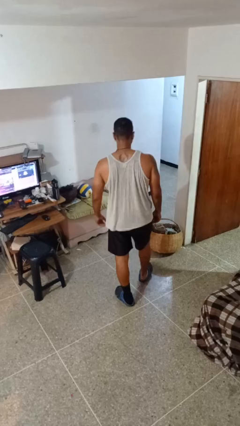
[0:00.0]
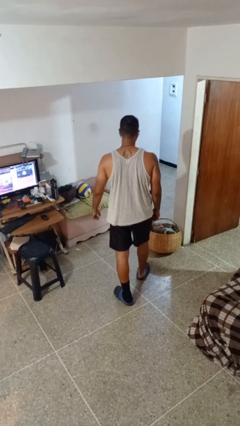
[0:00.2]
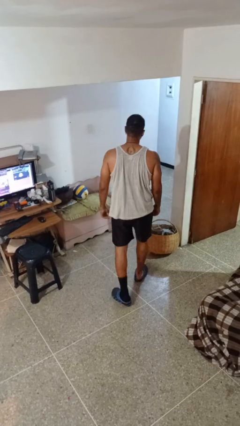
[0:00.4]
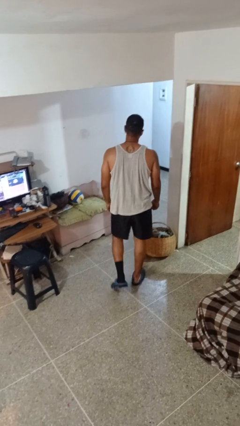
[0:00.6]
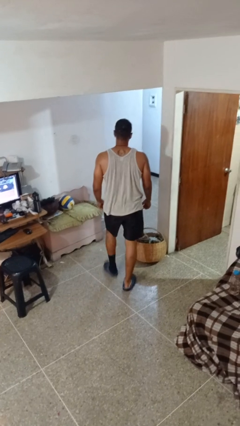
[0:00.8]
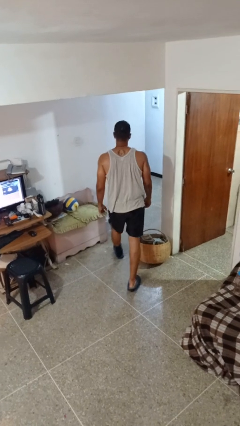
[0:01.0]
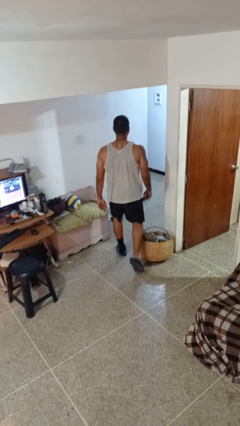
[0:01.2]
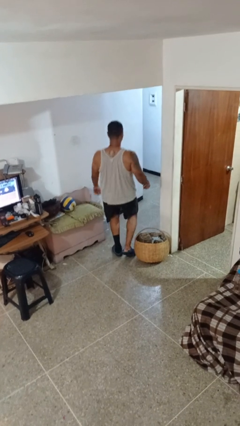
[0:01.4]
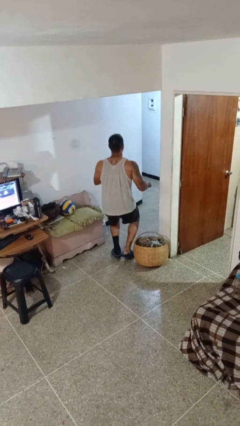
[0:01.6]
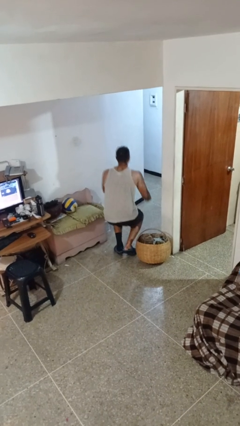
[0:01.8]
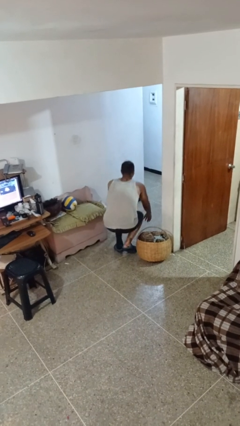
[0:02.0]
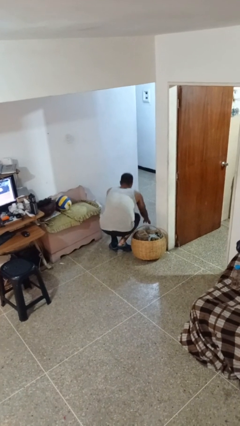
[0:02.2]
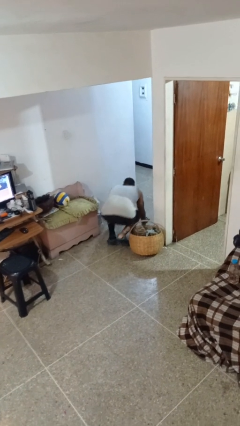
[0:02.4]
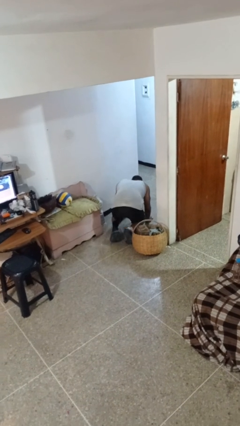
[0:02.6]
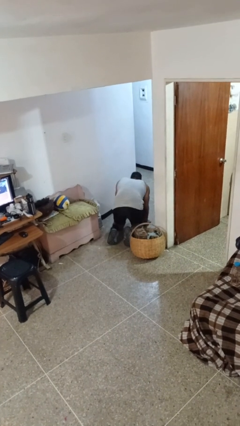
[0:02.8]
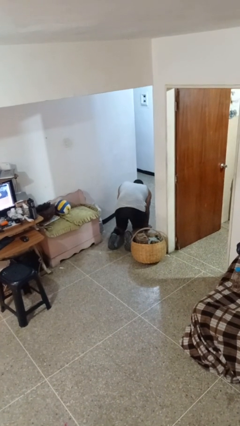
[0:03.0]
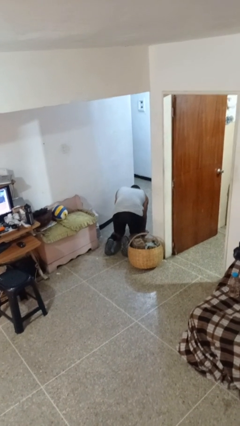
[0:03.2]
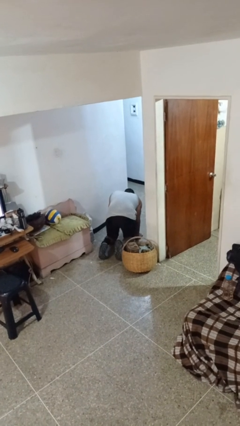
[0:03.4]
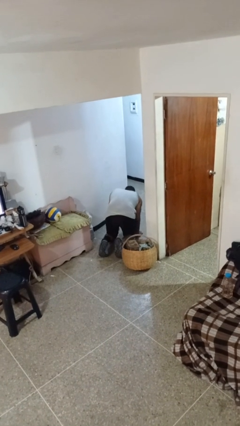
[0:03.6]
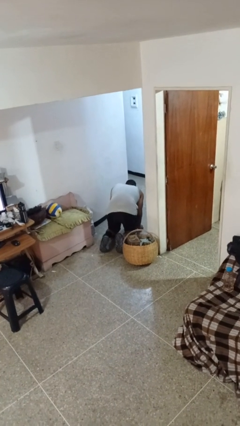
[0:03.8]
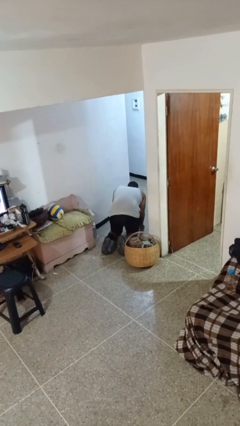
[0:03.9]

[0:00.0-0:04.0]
person trips on object on floor

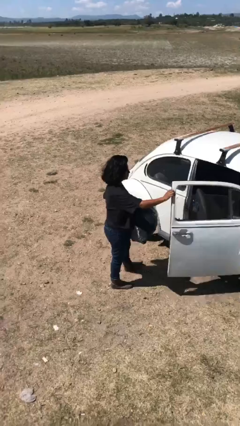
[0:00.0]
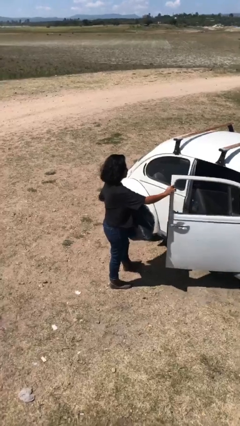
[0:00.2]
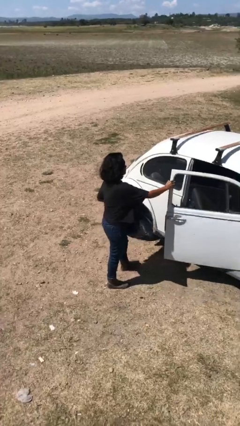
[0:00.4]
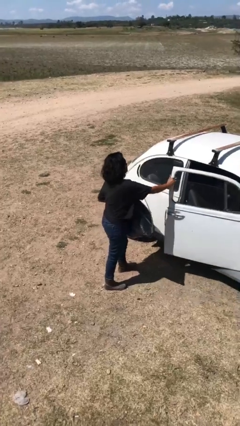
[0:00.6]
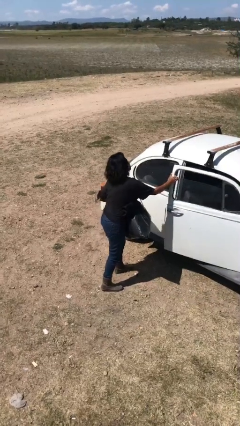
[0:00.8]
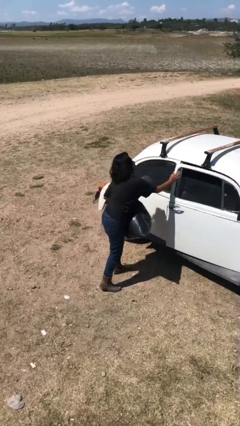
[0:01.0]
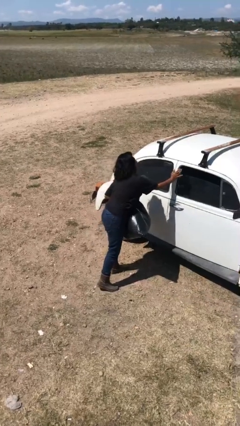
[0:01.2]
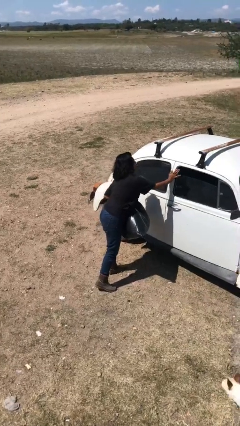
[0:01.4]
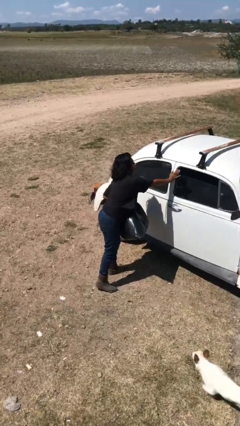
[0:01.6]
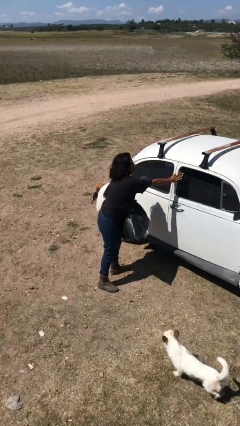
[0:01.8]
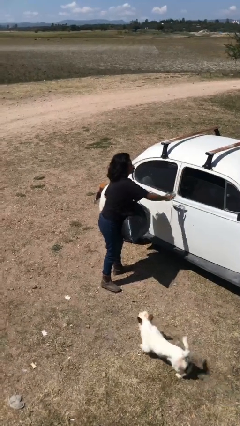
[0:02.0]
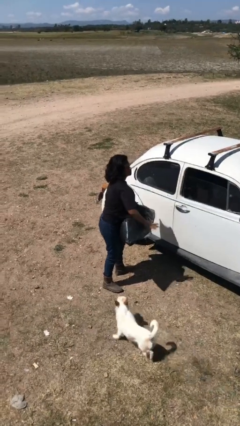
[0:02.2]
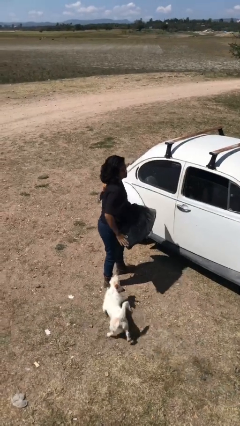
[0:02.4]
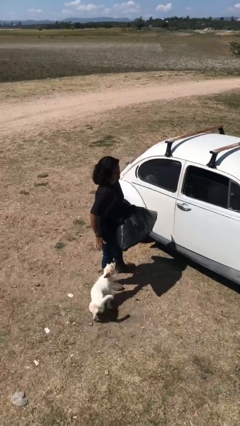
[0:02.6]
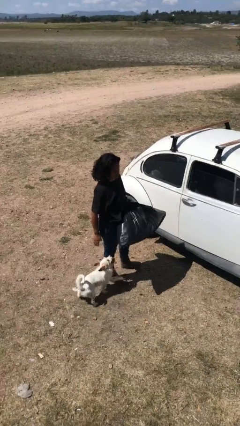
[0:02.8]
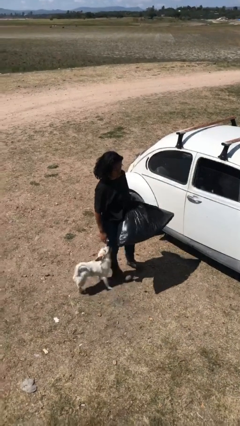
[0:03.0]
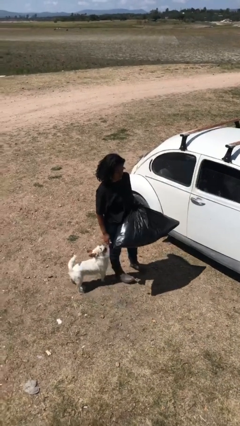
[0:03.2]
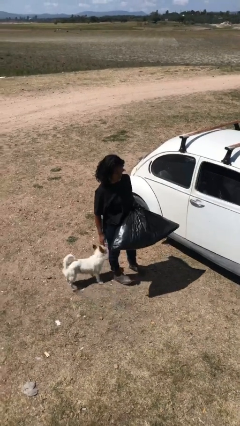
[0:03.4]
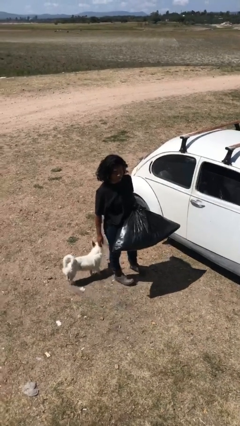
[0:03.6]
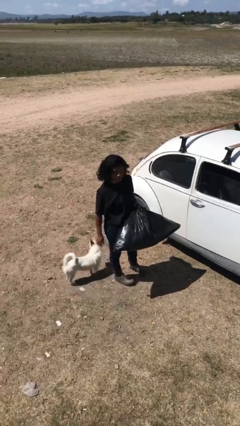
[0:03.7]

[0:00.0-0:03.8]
person closes car door

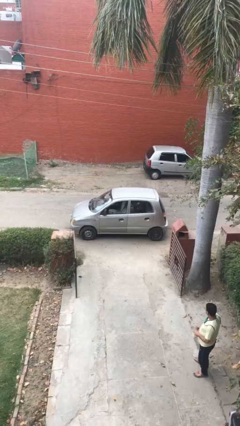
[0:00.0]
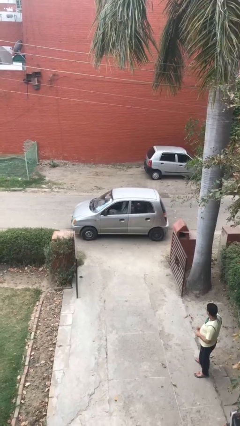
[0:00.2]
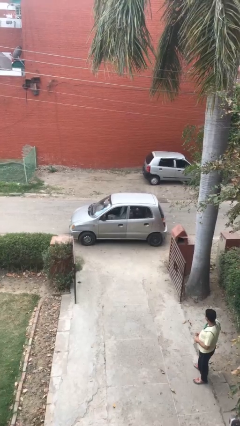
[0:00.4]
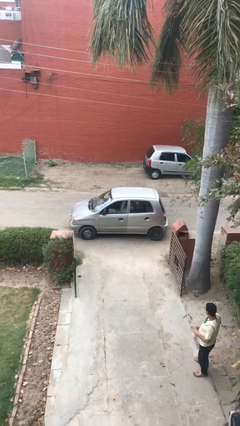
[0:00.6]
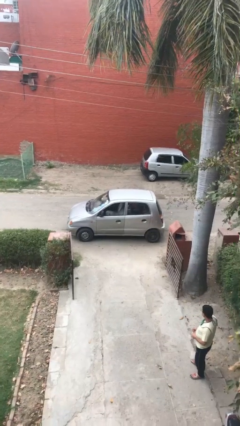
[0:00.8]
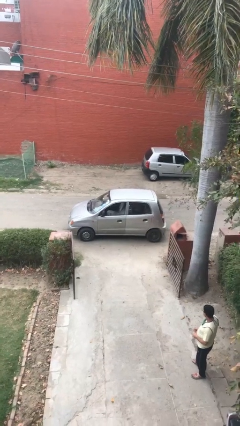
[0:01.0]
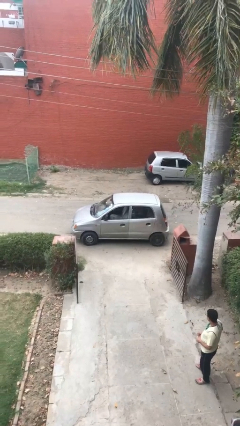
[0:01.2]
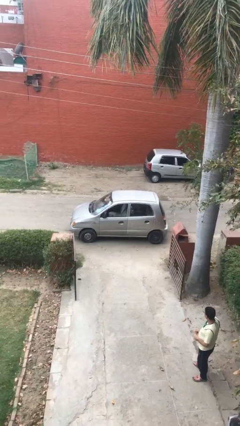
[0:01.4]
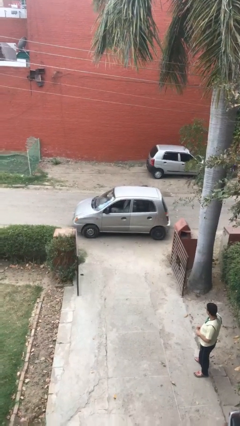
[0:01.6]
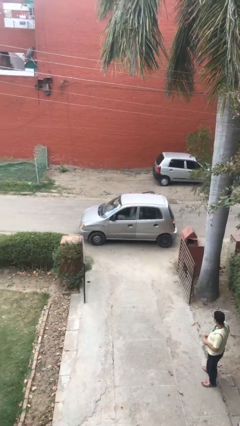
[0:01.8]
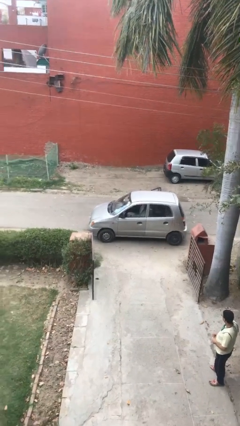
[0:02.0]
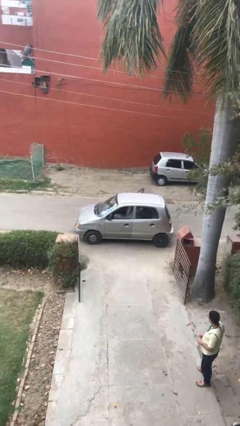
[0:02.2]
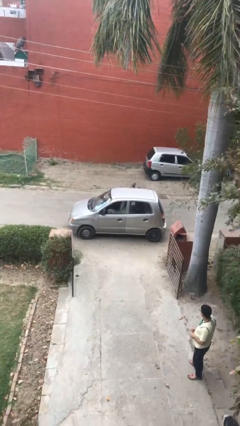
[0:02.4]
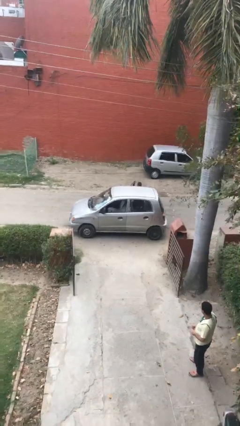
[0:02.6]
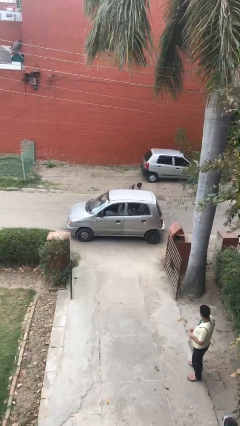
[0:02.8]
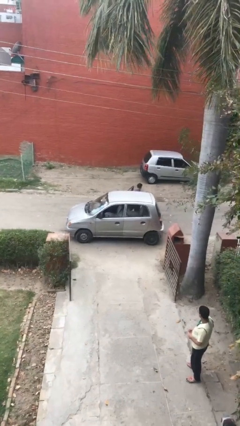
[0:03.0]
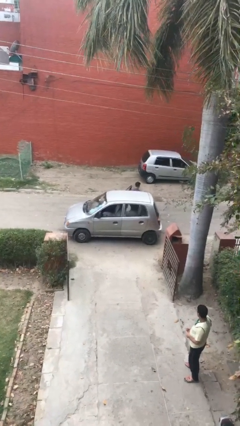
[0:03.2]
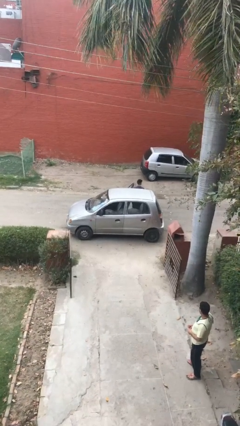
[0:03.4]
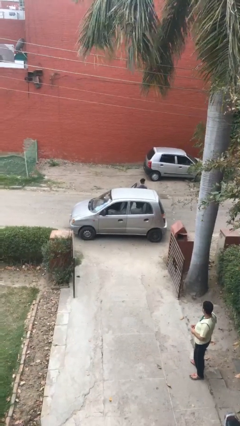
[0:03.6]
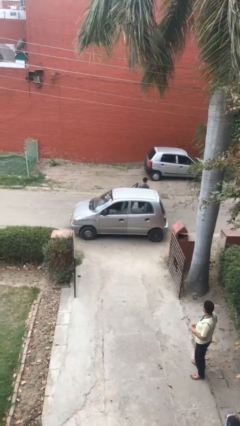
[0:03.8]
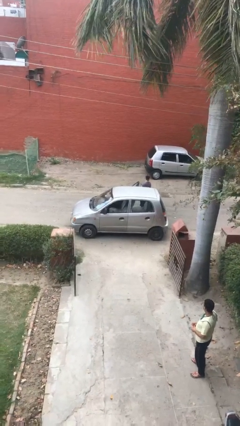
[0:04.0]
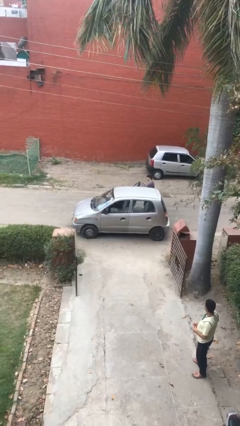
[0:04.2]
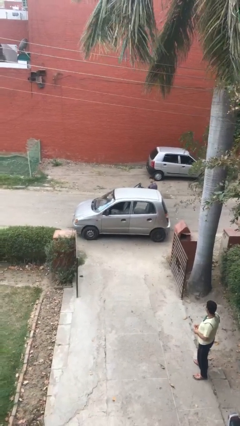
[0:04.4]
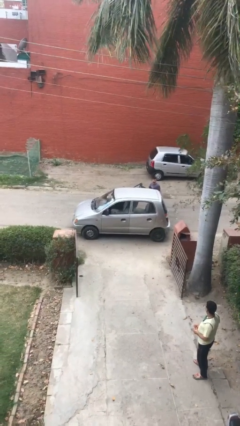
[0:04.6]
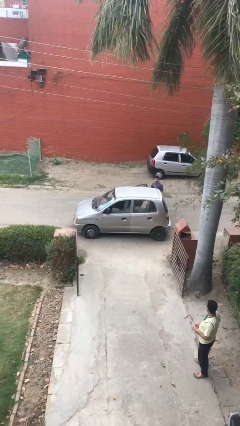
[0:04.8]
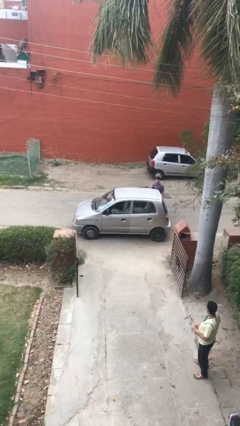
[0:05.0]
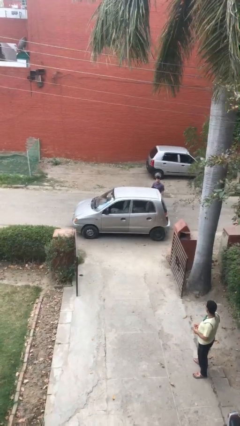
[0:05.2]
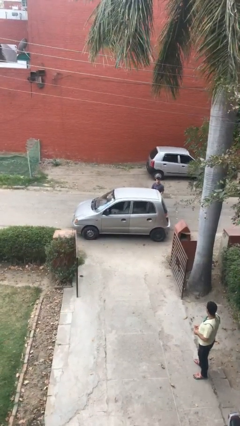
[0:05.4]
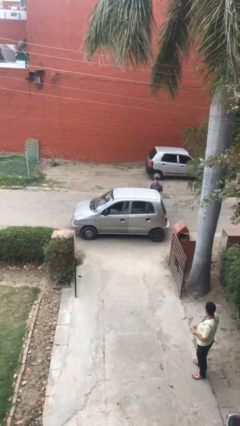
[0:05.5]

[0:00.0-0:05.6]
car drops off person

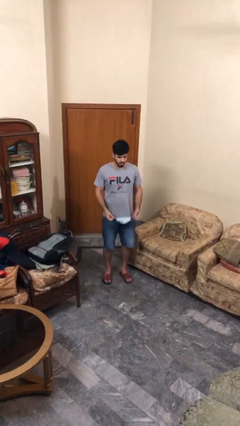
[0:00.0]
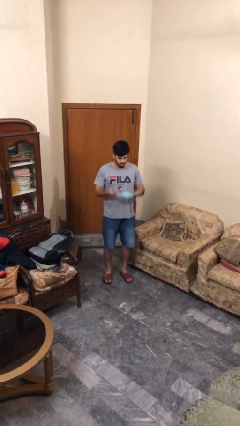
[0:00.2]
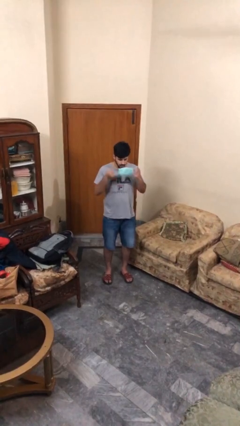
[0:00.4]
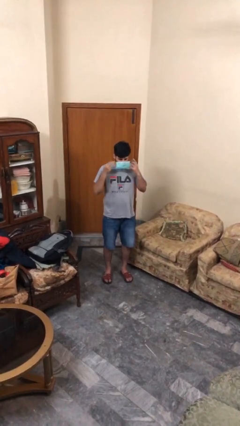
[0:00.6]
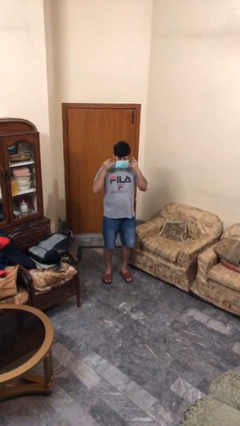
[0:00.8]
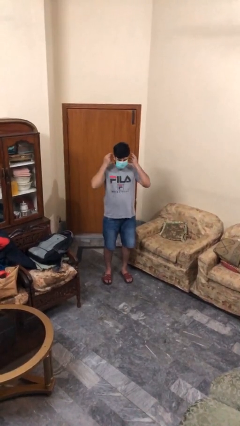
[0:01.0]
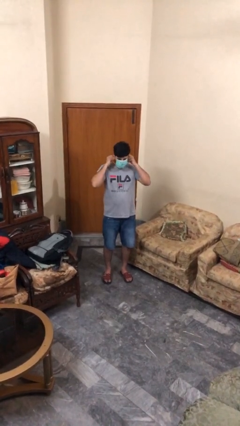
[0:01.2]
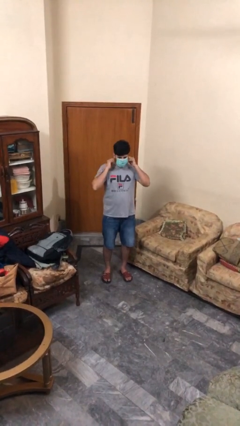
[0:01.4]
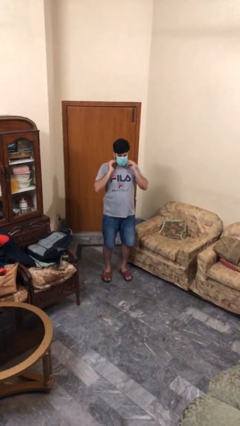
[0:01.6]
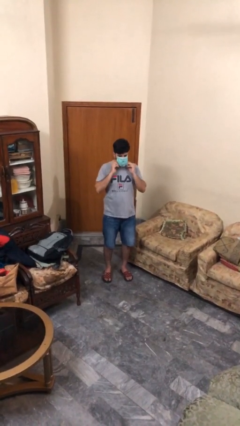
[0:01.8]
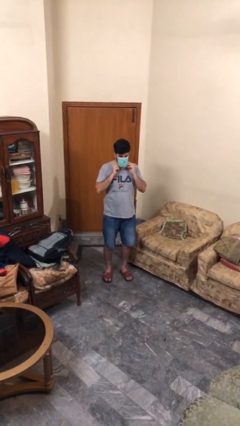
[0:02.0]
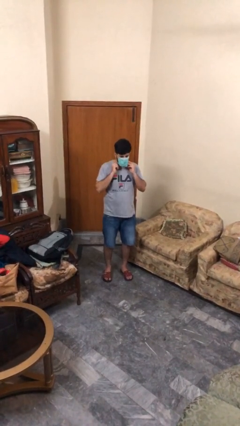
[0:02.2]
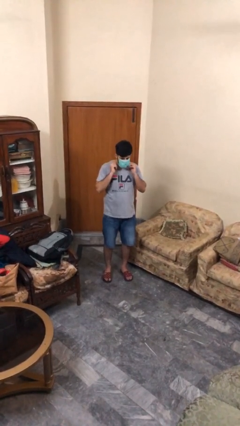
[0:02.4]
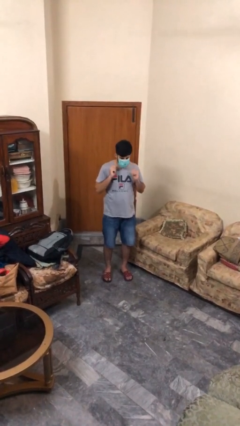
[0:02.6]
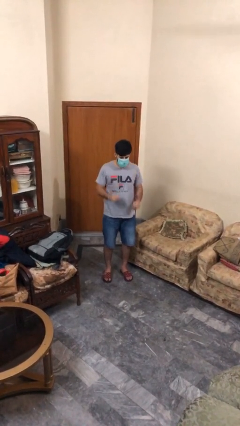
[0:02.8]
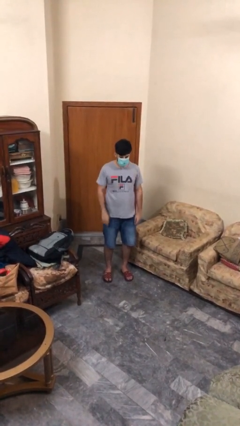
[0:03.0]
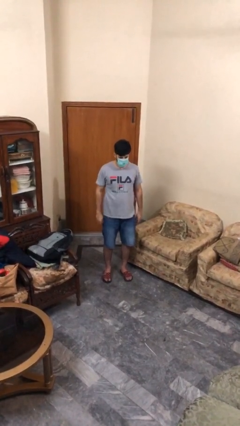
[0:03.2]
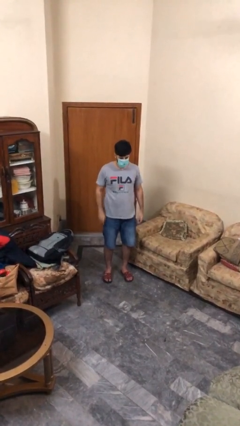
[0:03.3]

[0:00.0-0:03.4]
person puts on facemask

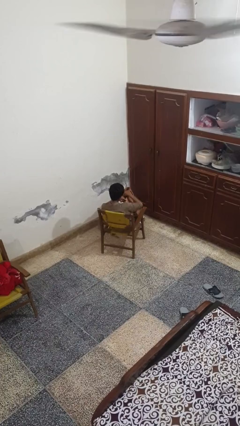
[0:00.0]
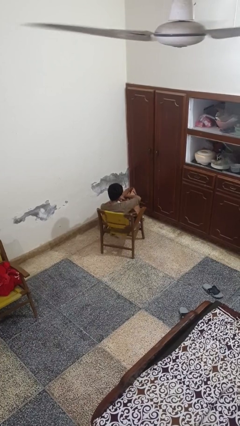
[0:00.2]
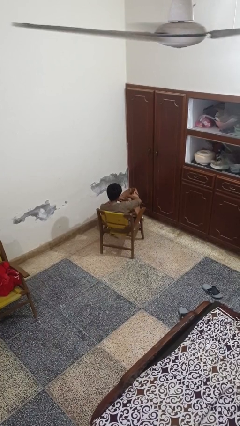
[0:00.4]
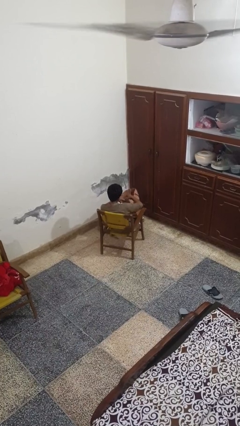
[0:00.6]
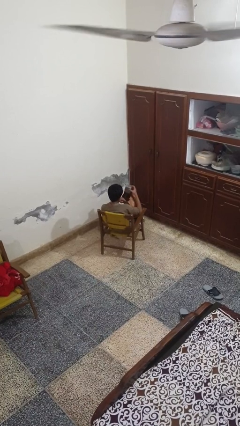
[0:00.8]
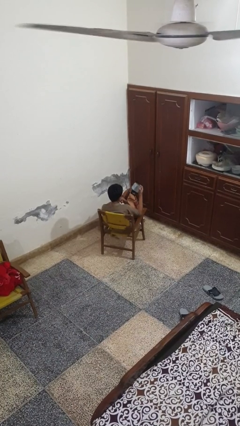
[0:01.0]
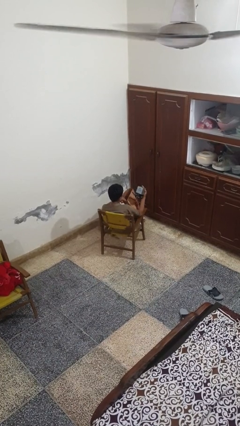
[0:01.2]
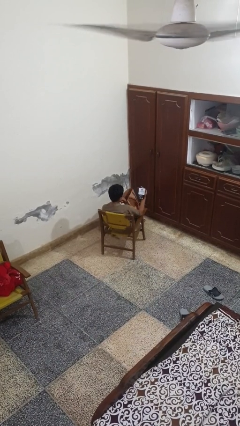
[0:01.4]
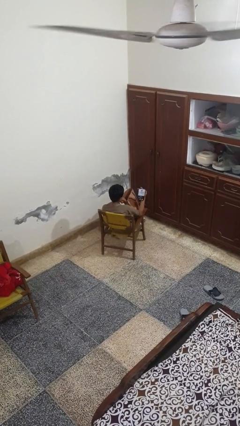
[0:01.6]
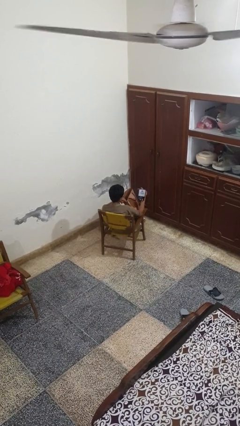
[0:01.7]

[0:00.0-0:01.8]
person takes object from bag
